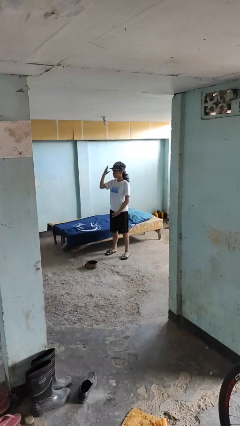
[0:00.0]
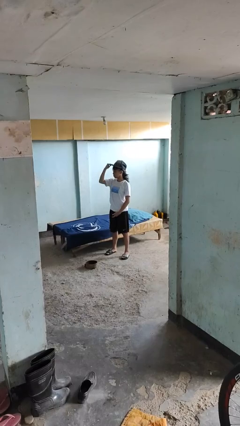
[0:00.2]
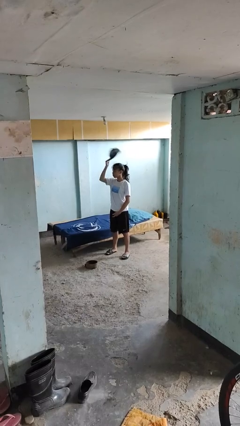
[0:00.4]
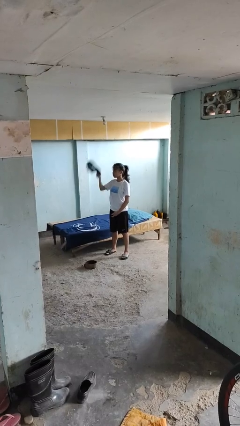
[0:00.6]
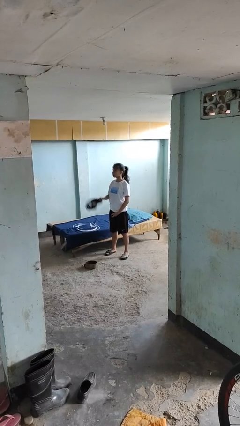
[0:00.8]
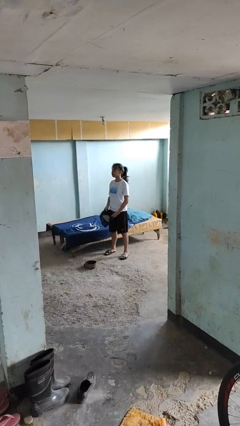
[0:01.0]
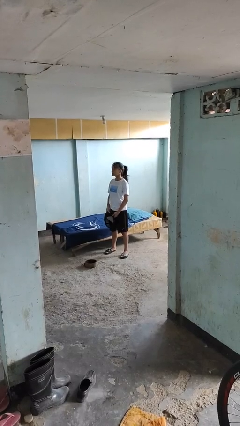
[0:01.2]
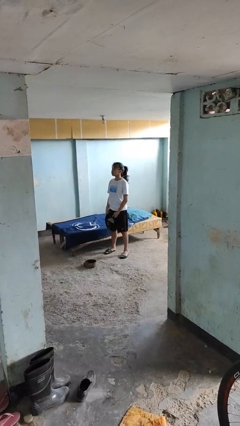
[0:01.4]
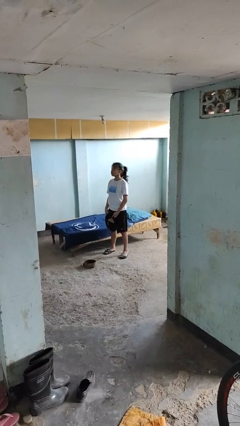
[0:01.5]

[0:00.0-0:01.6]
person takes off hat

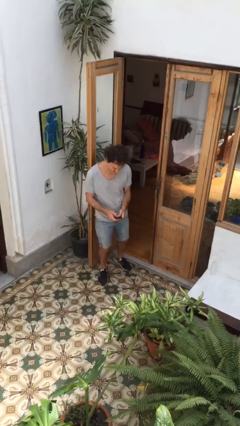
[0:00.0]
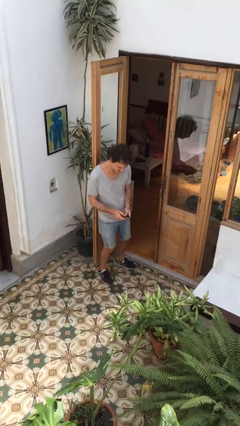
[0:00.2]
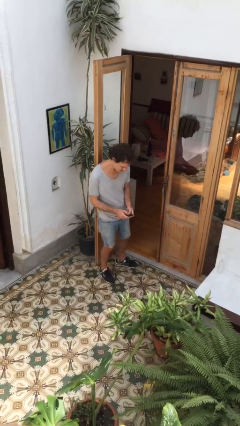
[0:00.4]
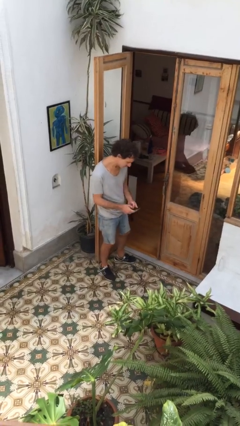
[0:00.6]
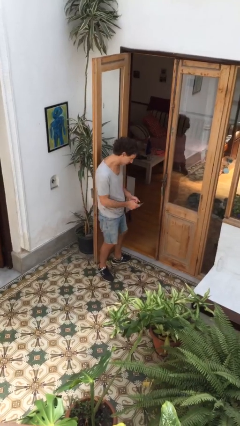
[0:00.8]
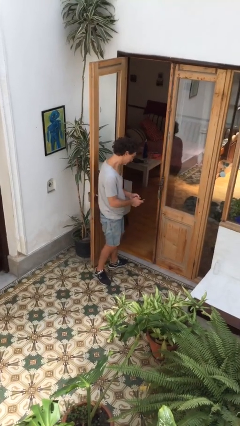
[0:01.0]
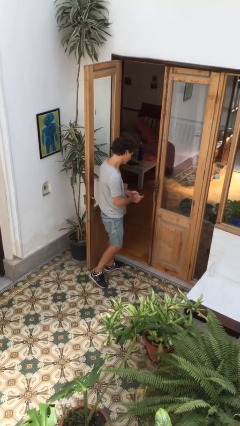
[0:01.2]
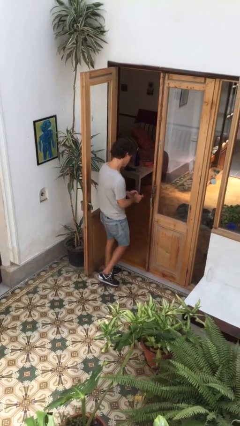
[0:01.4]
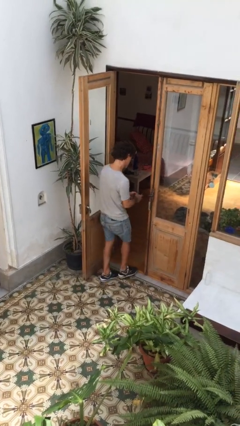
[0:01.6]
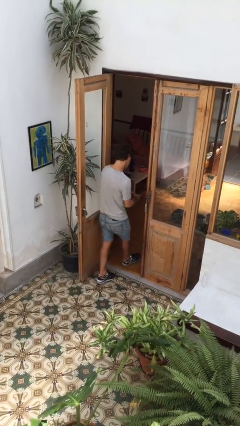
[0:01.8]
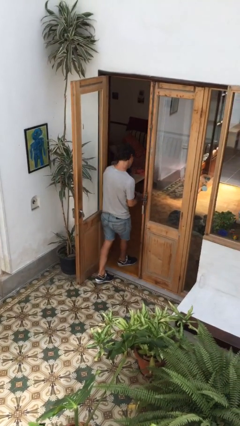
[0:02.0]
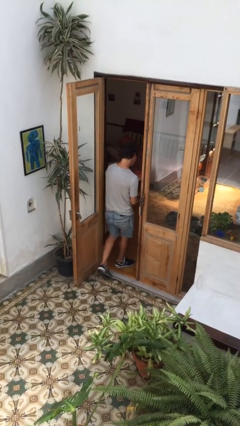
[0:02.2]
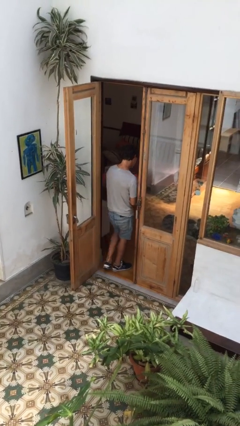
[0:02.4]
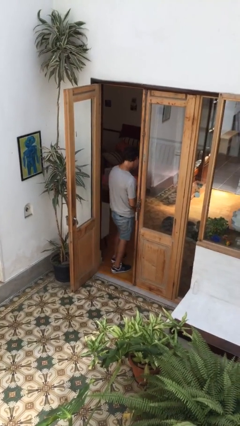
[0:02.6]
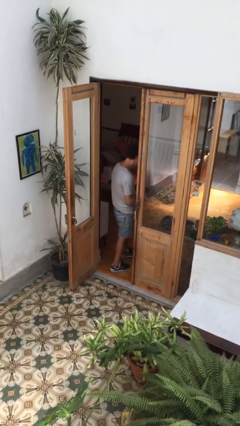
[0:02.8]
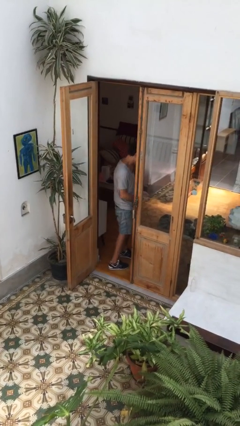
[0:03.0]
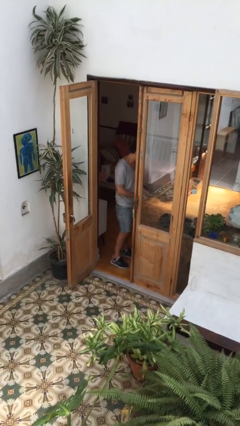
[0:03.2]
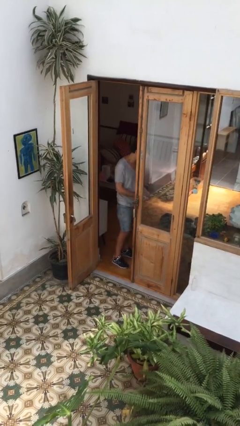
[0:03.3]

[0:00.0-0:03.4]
person exits scene through structure

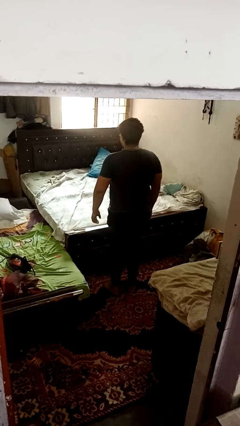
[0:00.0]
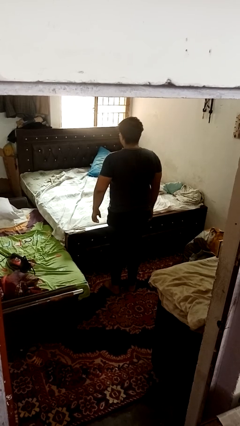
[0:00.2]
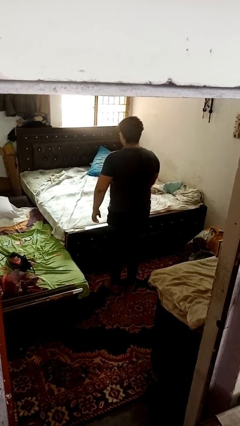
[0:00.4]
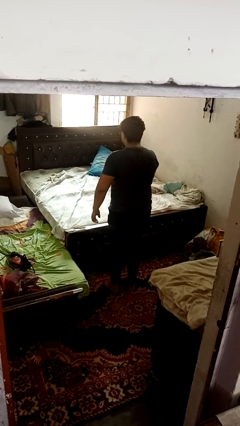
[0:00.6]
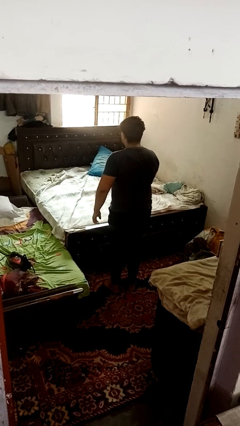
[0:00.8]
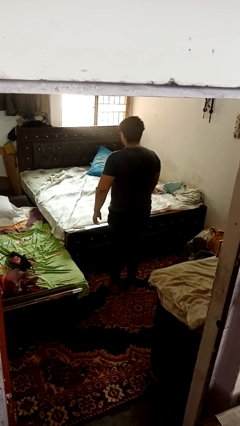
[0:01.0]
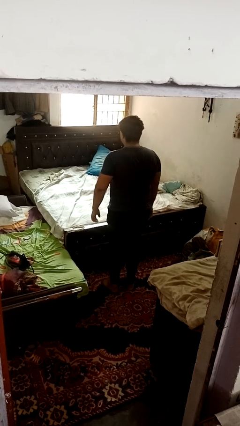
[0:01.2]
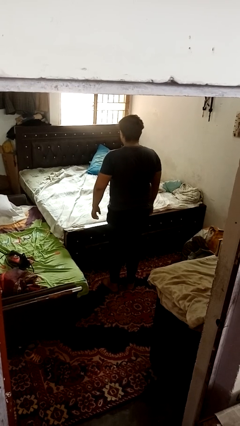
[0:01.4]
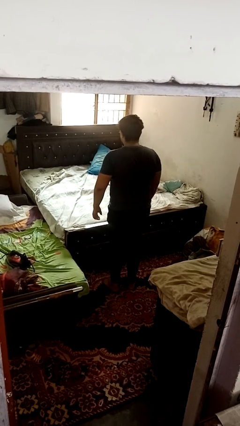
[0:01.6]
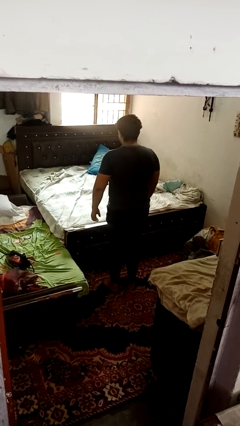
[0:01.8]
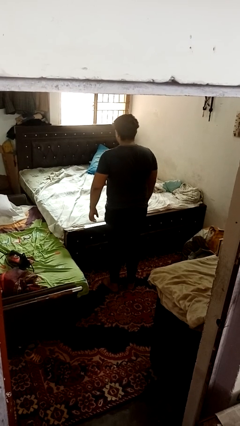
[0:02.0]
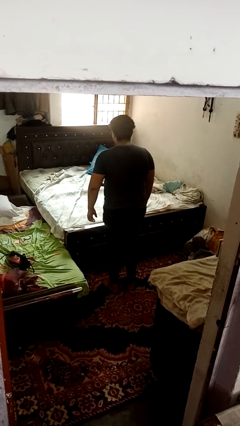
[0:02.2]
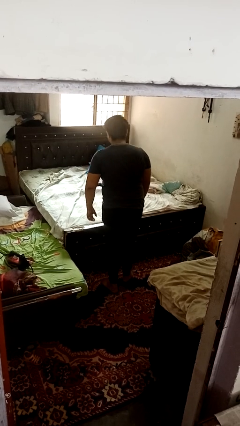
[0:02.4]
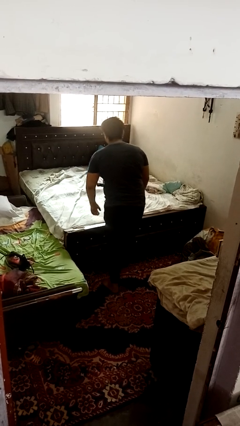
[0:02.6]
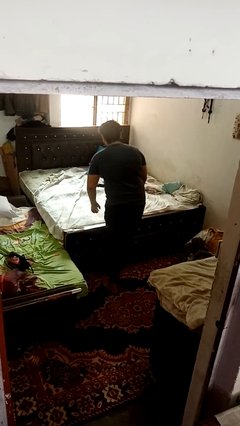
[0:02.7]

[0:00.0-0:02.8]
person throws object on bed

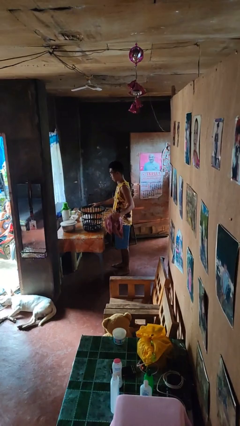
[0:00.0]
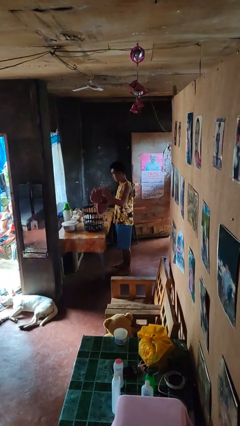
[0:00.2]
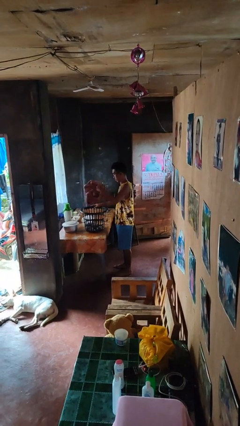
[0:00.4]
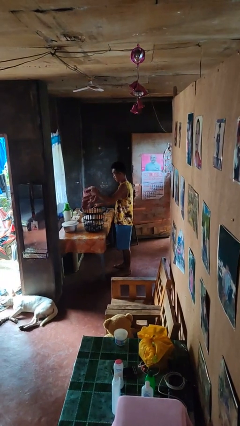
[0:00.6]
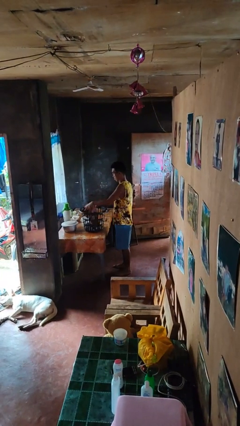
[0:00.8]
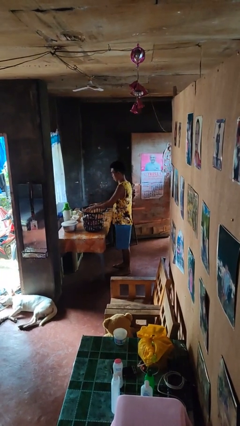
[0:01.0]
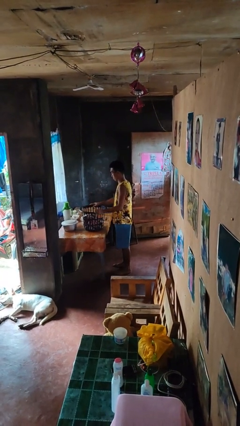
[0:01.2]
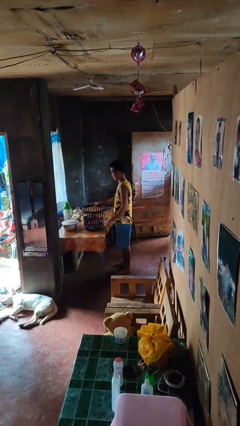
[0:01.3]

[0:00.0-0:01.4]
person puts object into basket

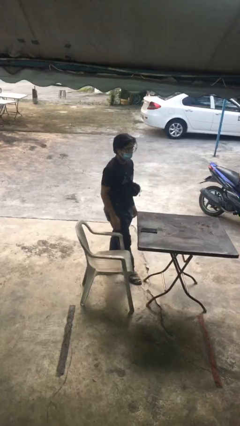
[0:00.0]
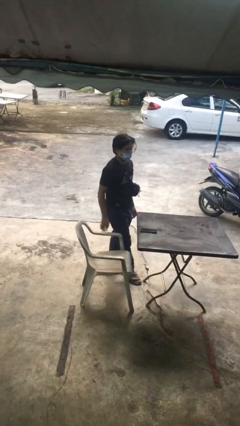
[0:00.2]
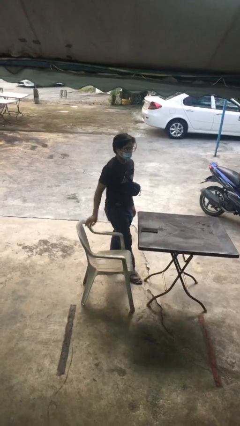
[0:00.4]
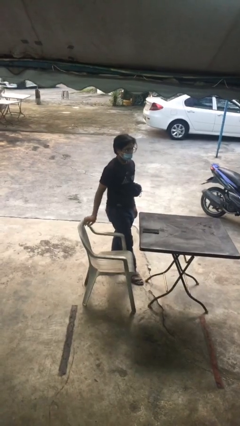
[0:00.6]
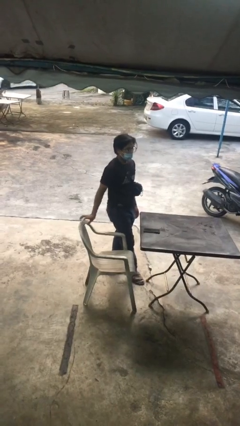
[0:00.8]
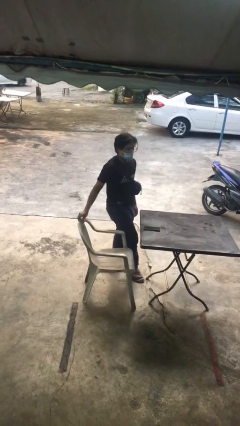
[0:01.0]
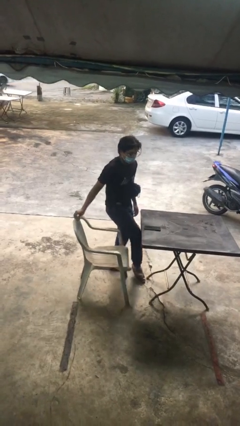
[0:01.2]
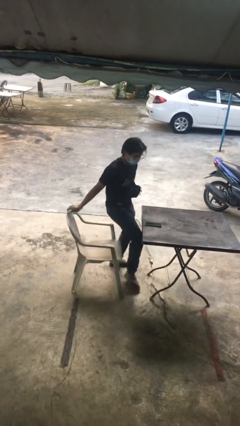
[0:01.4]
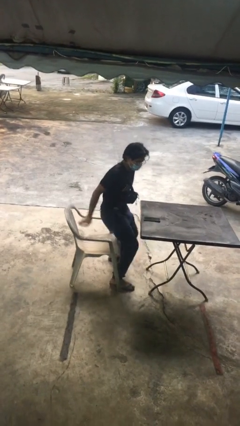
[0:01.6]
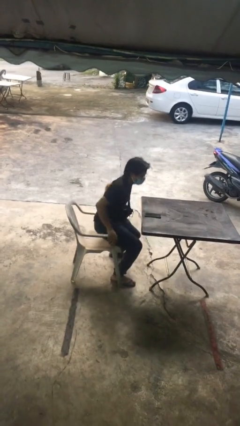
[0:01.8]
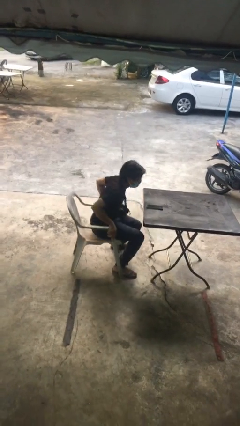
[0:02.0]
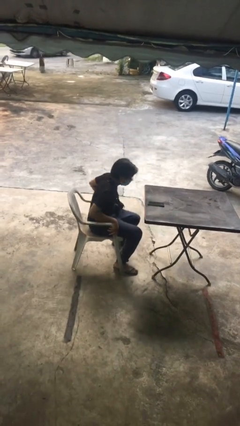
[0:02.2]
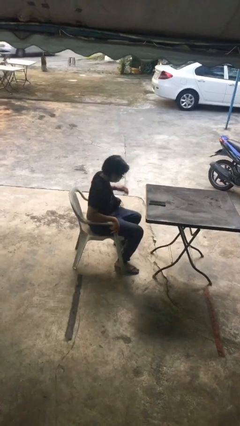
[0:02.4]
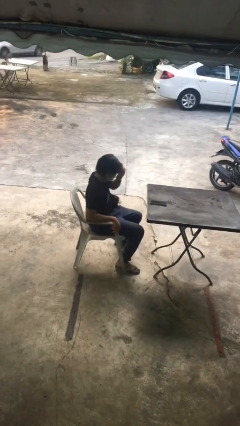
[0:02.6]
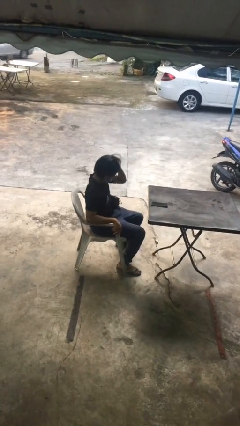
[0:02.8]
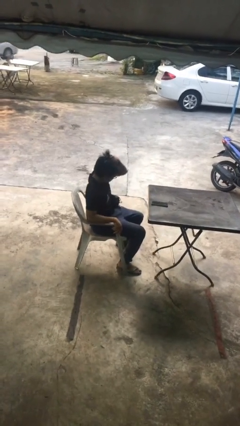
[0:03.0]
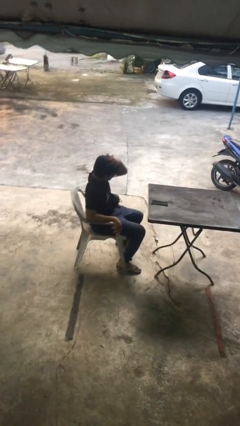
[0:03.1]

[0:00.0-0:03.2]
person sits down

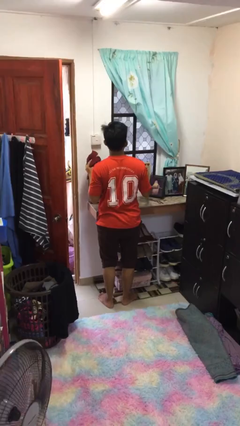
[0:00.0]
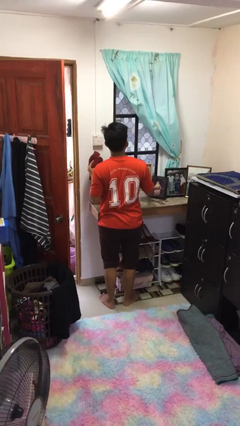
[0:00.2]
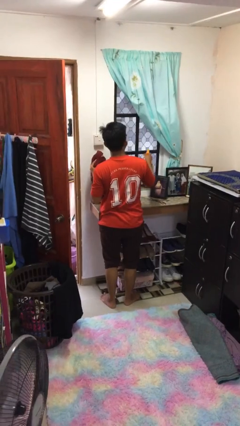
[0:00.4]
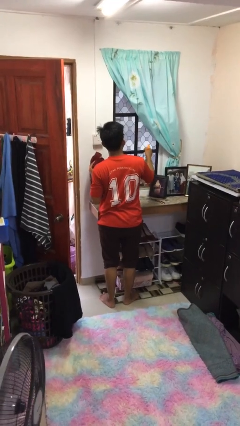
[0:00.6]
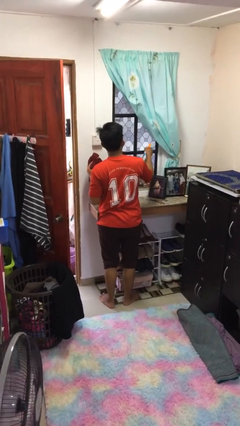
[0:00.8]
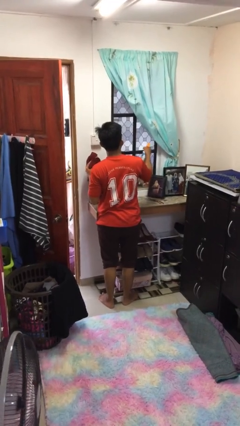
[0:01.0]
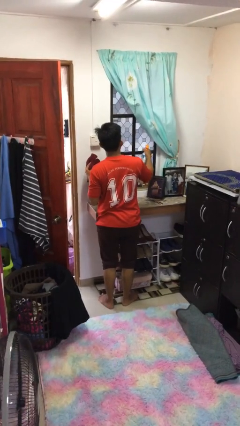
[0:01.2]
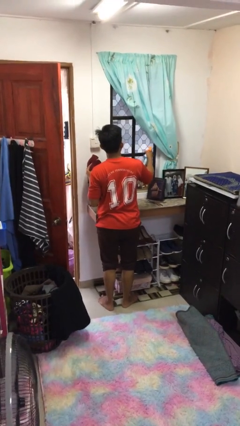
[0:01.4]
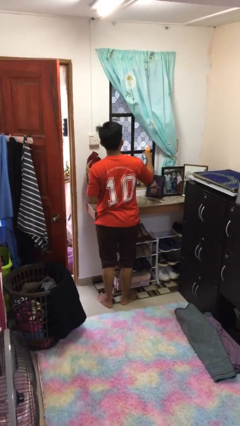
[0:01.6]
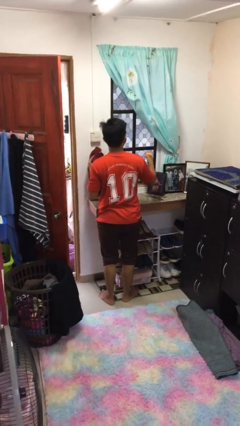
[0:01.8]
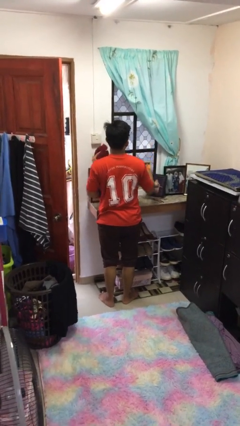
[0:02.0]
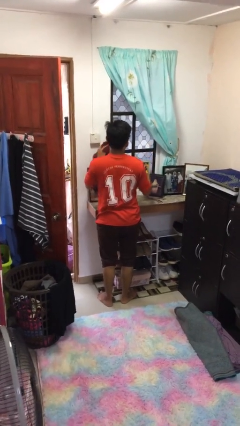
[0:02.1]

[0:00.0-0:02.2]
person sprays from bottle

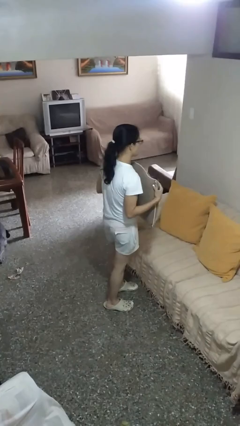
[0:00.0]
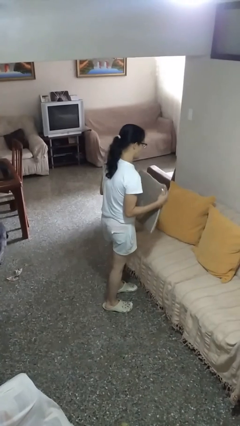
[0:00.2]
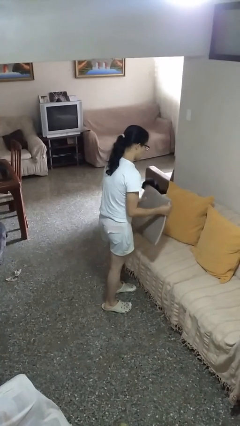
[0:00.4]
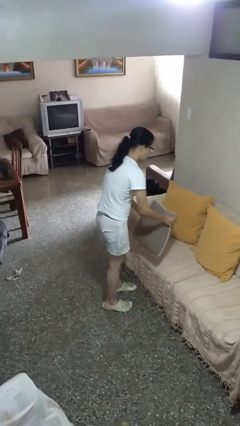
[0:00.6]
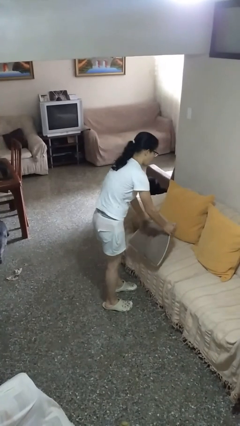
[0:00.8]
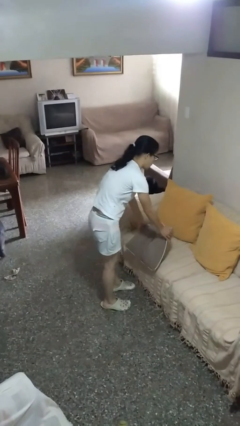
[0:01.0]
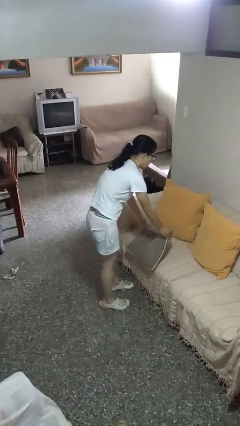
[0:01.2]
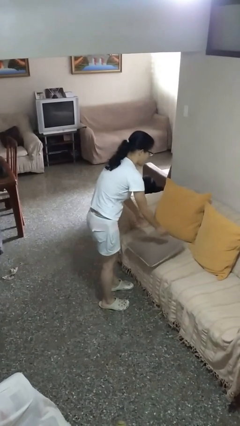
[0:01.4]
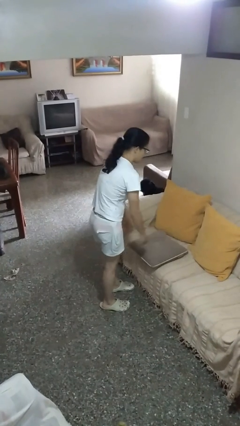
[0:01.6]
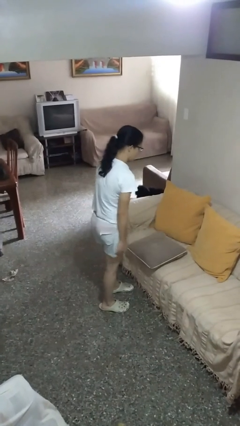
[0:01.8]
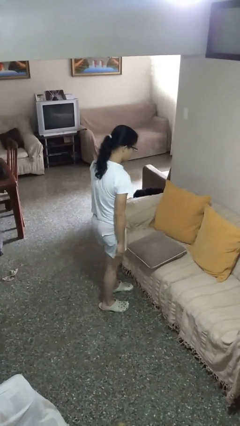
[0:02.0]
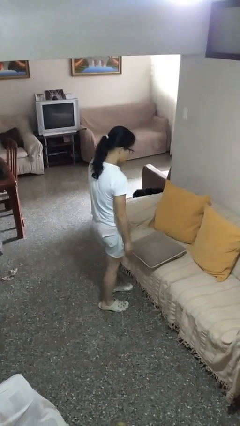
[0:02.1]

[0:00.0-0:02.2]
person puts down object on couch
